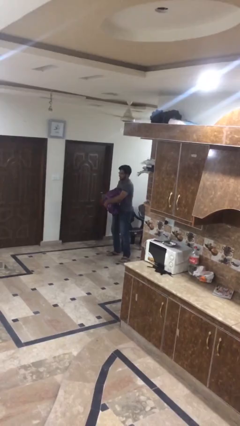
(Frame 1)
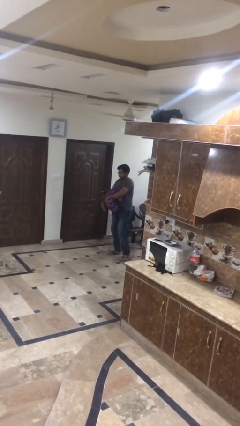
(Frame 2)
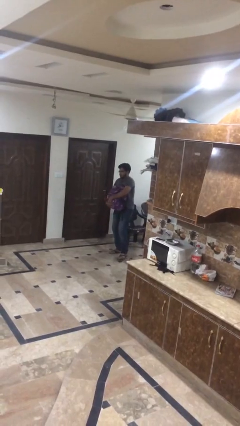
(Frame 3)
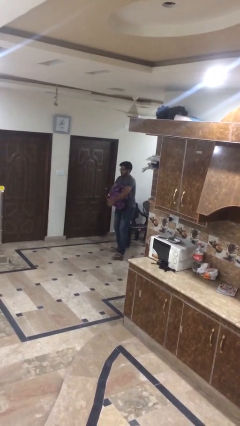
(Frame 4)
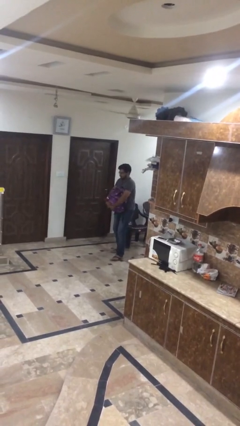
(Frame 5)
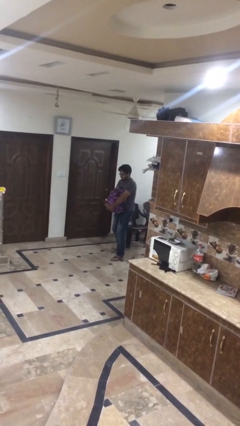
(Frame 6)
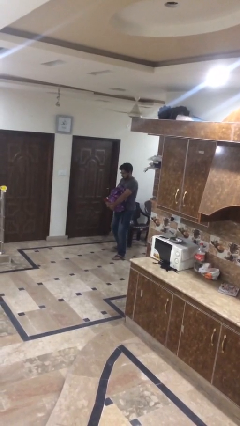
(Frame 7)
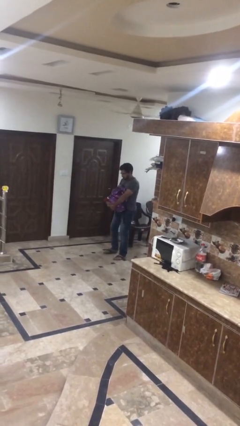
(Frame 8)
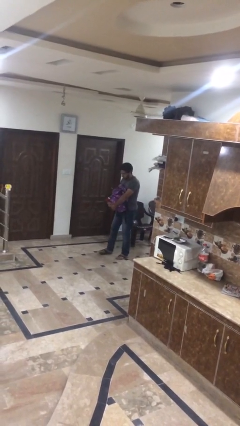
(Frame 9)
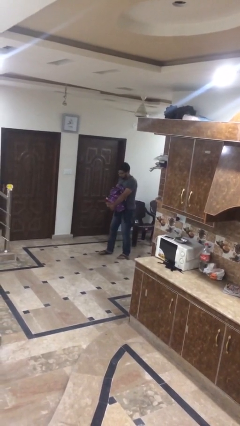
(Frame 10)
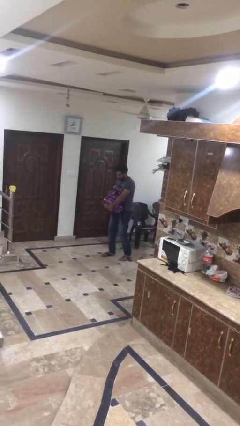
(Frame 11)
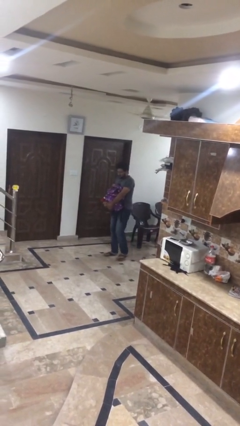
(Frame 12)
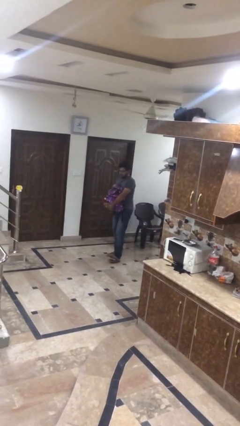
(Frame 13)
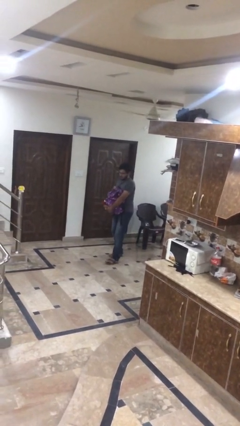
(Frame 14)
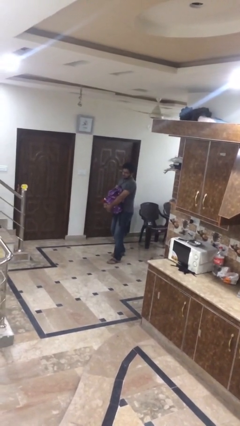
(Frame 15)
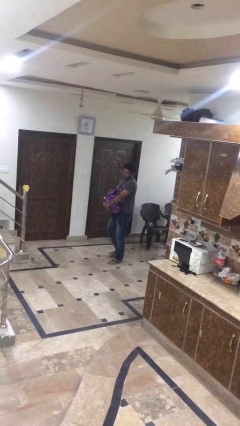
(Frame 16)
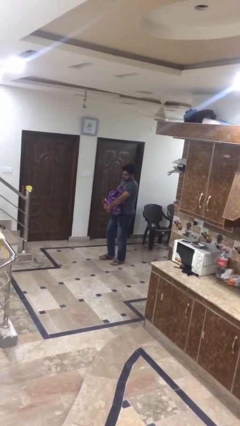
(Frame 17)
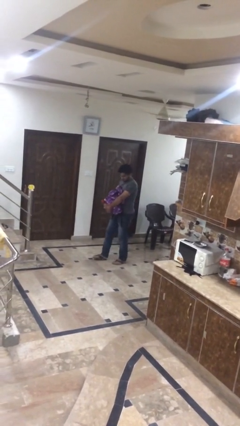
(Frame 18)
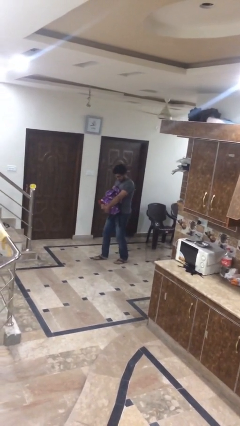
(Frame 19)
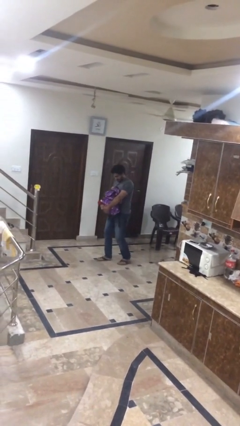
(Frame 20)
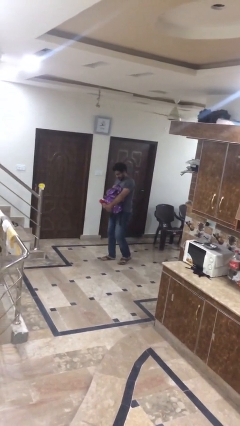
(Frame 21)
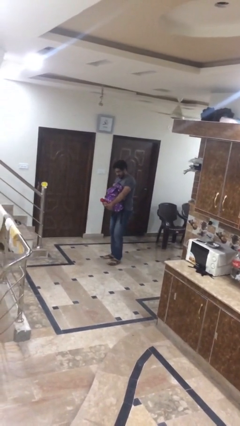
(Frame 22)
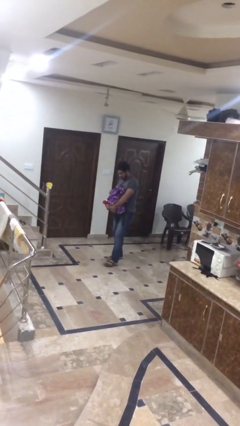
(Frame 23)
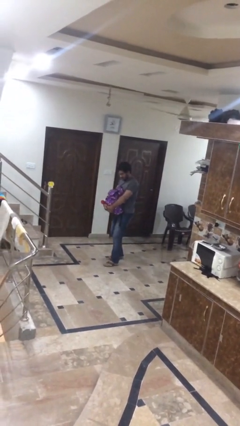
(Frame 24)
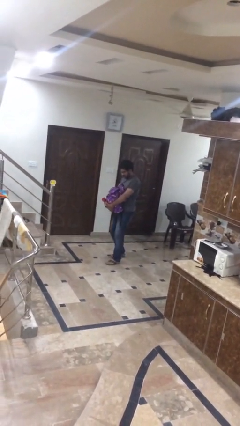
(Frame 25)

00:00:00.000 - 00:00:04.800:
person carries heavy object

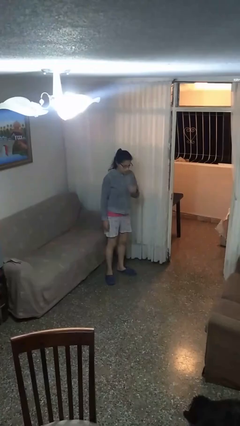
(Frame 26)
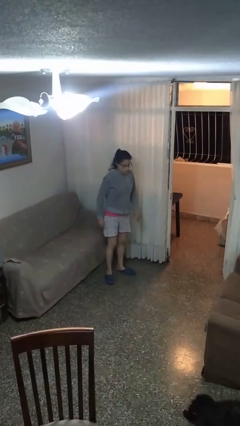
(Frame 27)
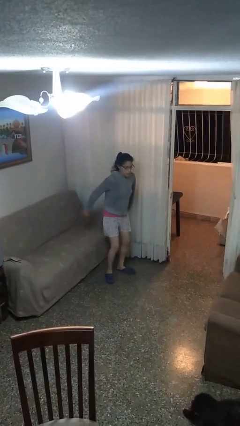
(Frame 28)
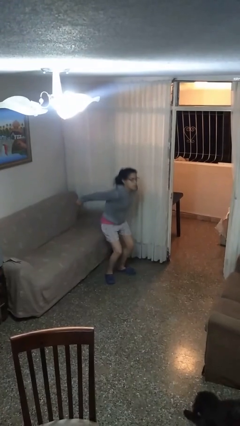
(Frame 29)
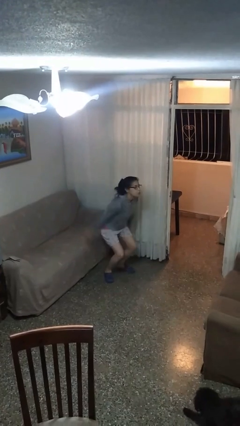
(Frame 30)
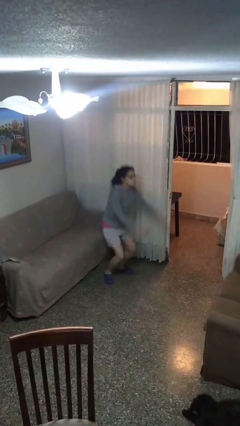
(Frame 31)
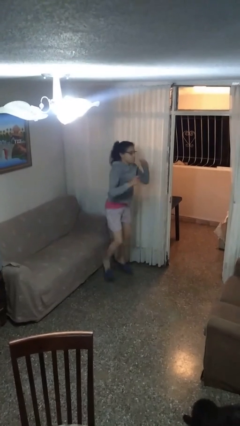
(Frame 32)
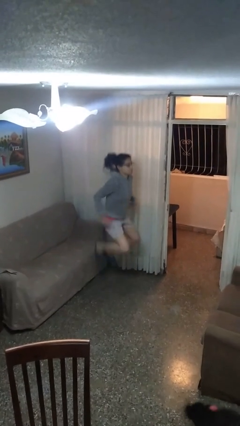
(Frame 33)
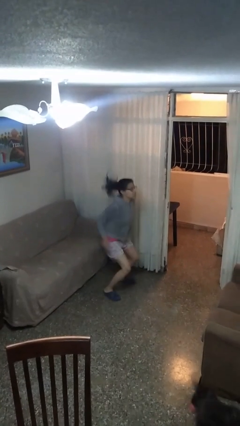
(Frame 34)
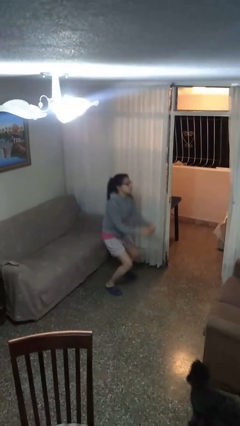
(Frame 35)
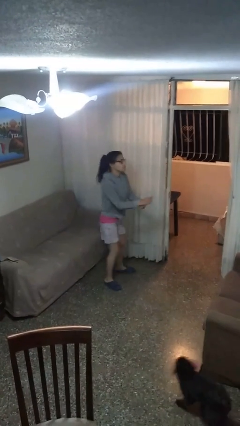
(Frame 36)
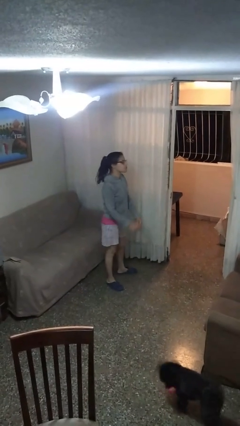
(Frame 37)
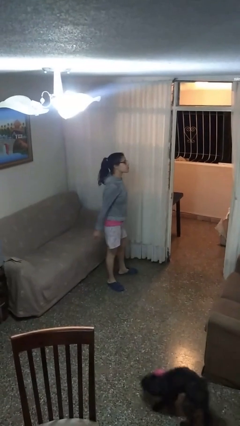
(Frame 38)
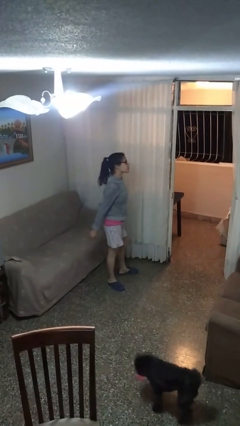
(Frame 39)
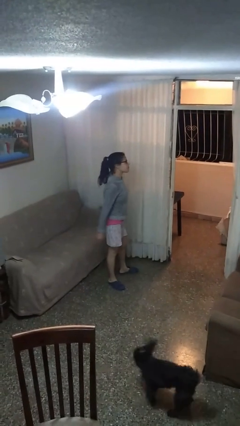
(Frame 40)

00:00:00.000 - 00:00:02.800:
person jumps

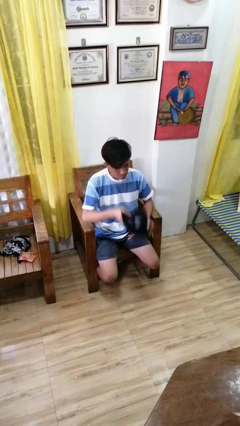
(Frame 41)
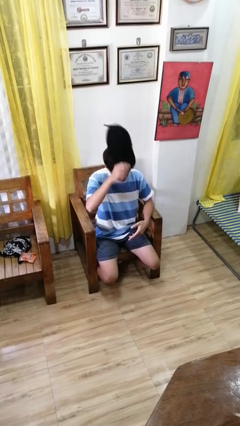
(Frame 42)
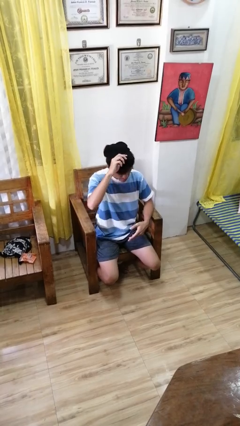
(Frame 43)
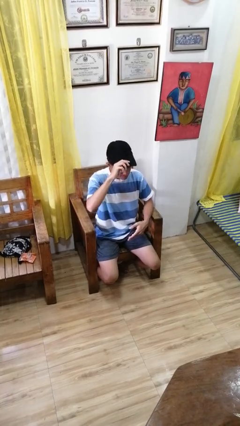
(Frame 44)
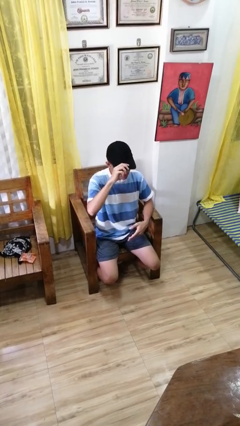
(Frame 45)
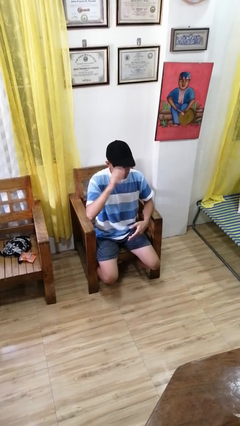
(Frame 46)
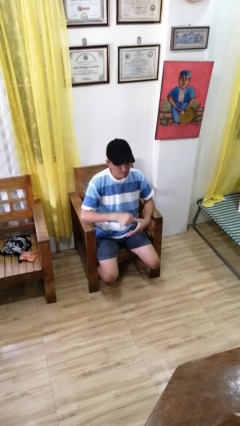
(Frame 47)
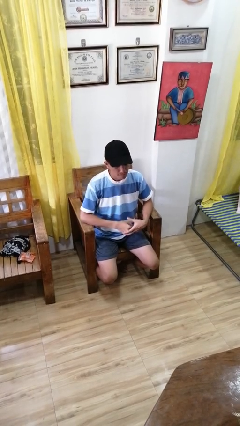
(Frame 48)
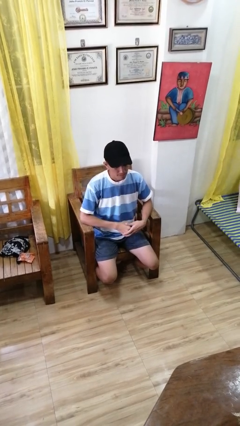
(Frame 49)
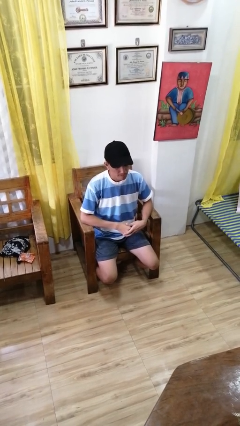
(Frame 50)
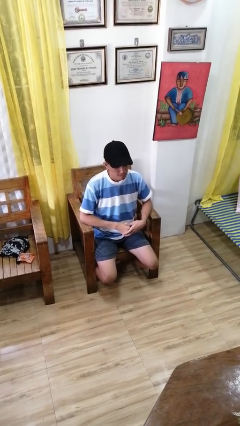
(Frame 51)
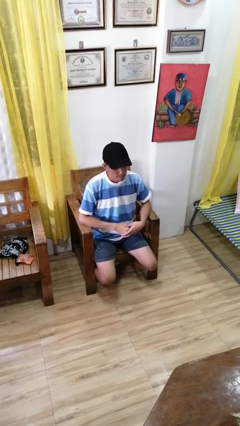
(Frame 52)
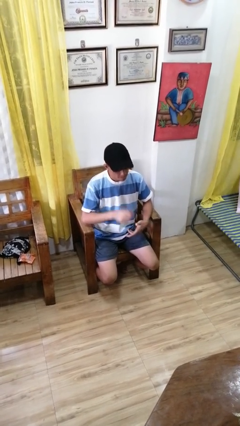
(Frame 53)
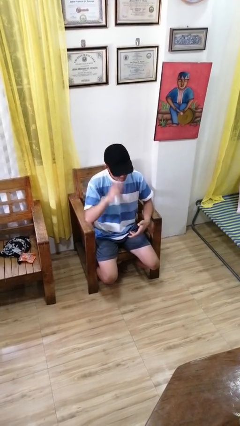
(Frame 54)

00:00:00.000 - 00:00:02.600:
person puts on hat

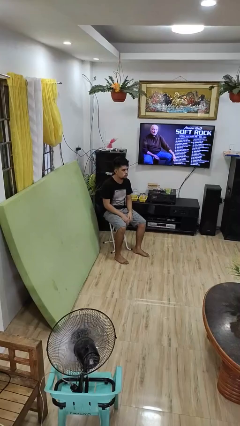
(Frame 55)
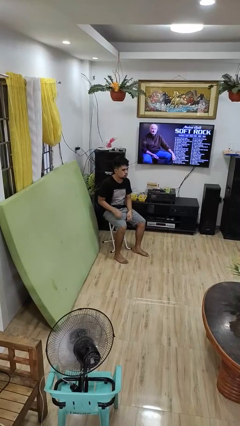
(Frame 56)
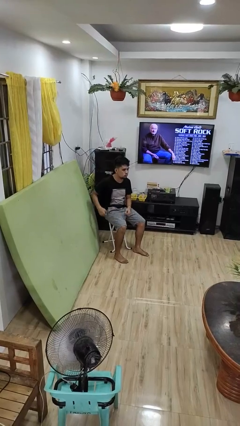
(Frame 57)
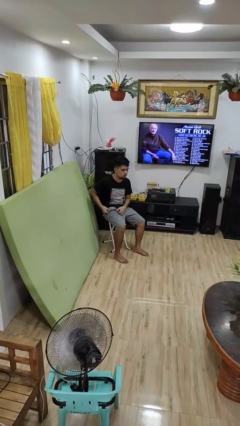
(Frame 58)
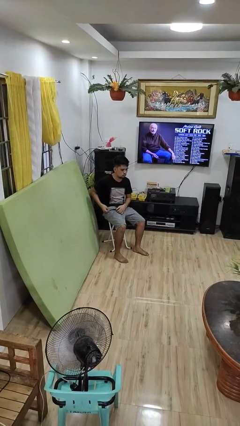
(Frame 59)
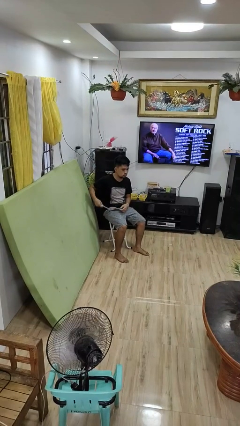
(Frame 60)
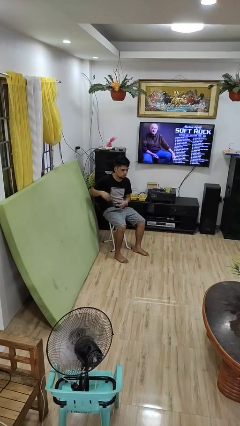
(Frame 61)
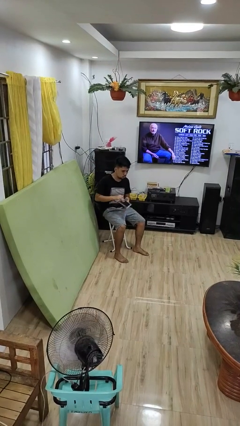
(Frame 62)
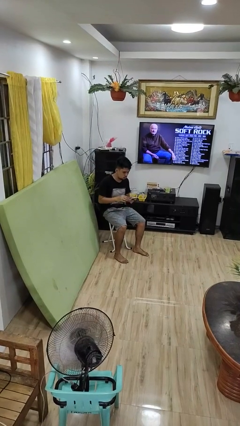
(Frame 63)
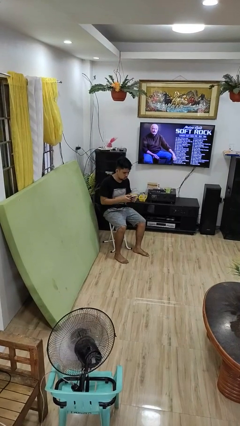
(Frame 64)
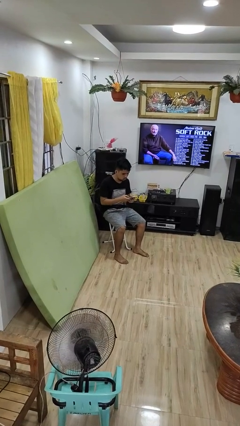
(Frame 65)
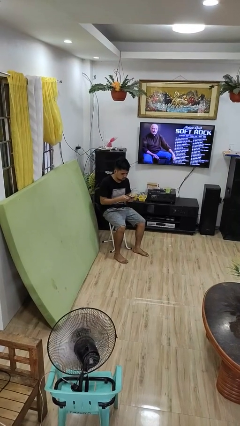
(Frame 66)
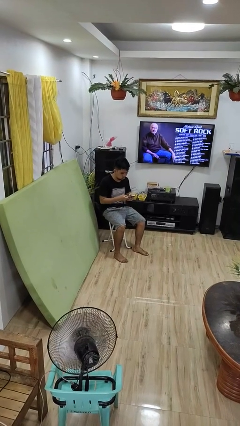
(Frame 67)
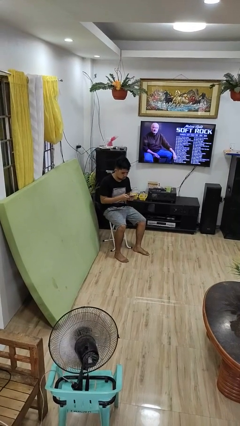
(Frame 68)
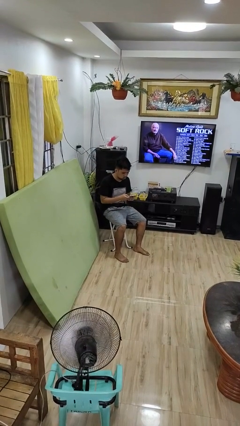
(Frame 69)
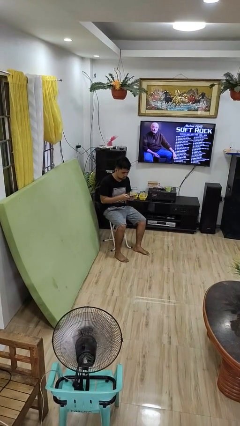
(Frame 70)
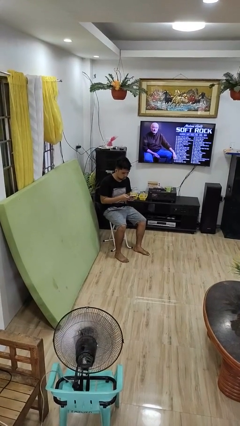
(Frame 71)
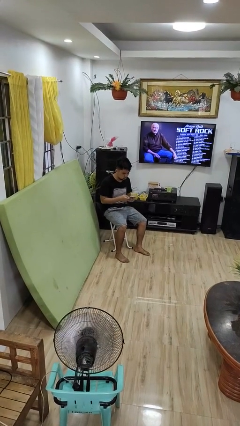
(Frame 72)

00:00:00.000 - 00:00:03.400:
person takes phone from pocket

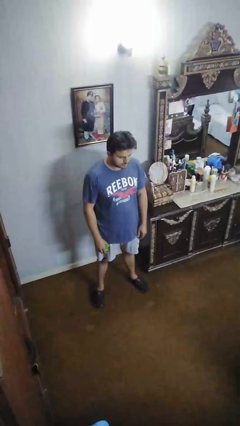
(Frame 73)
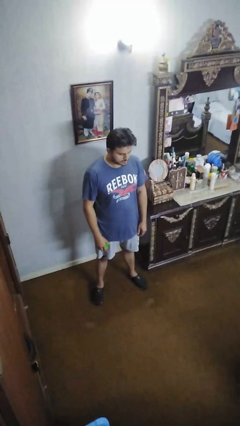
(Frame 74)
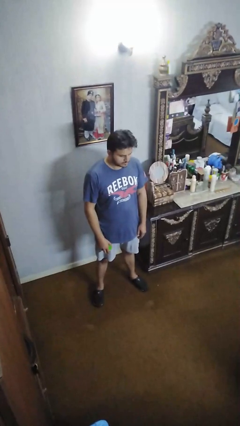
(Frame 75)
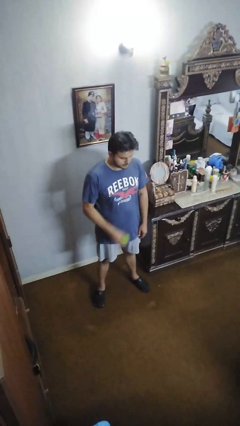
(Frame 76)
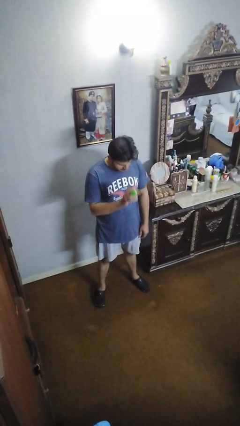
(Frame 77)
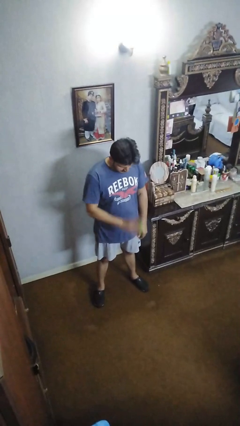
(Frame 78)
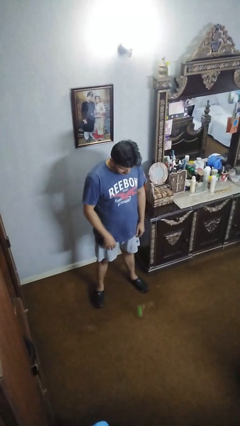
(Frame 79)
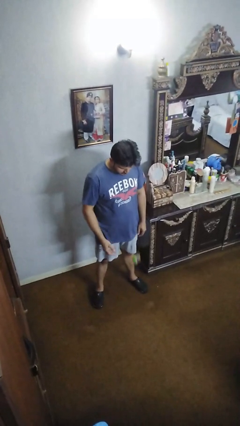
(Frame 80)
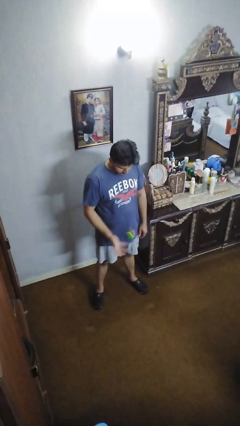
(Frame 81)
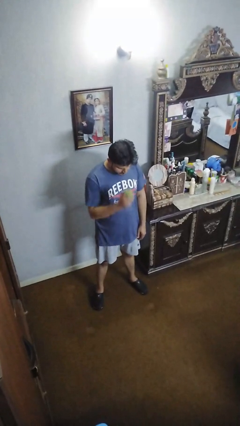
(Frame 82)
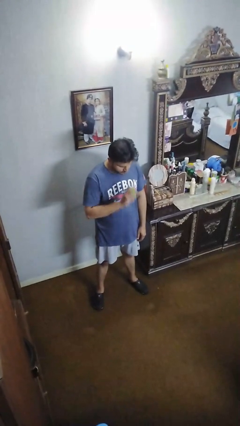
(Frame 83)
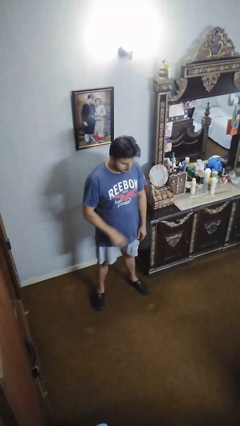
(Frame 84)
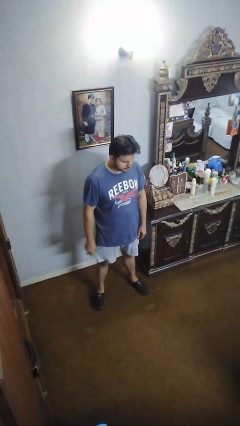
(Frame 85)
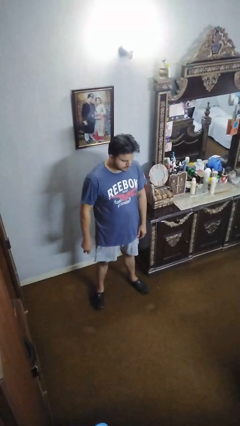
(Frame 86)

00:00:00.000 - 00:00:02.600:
person bounces ball on floor

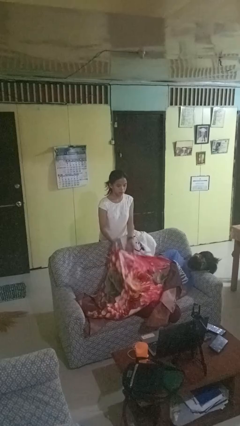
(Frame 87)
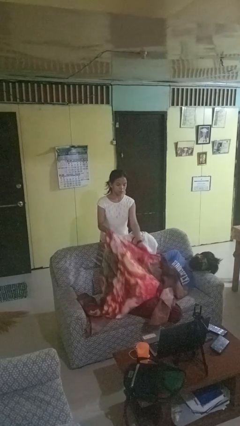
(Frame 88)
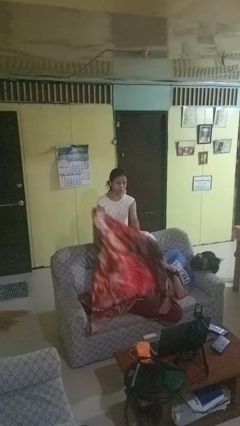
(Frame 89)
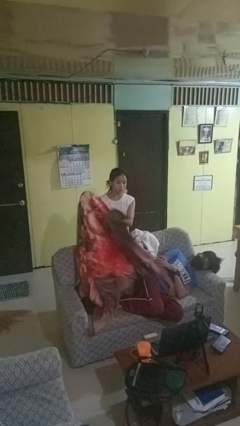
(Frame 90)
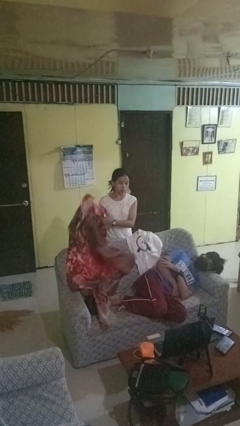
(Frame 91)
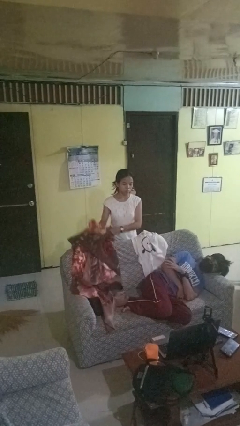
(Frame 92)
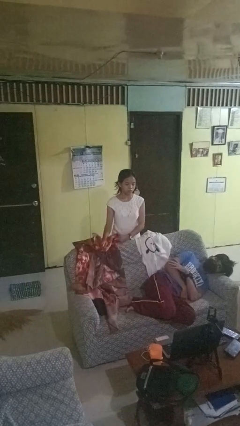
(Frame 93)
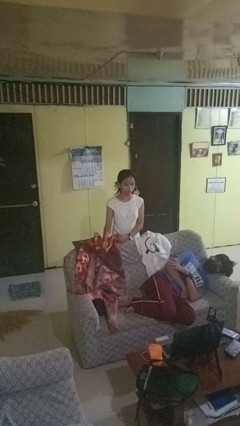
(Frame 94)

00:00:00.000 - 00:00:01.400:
person uncovers friend with blanket
